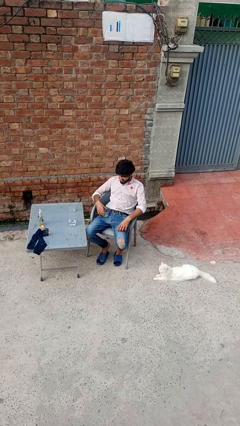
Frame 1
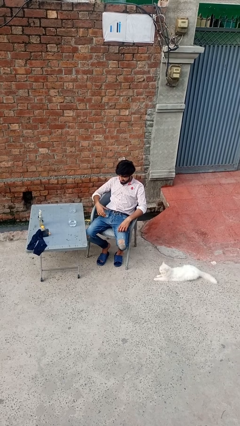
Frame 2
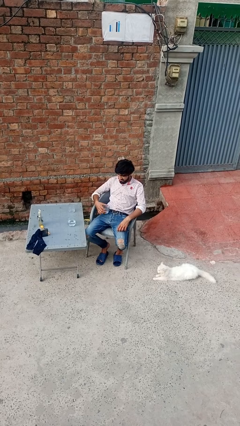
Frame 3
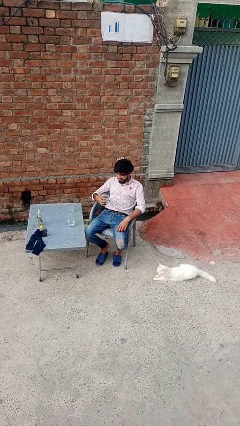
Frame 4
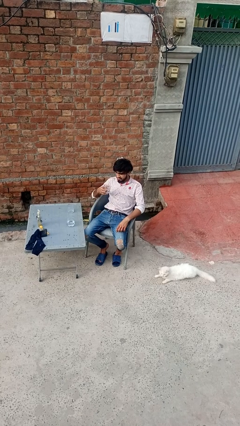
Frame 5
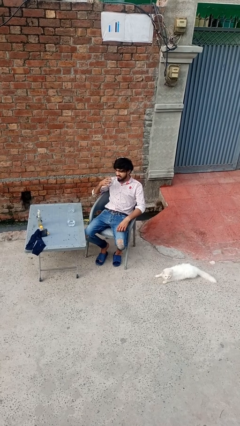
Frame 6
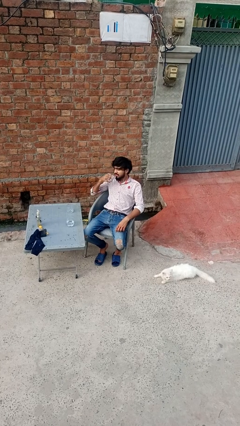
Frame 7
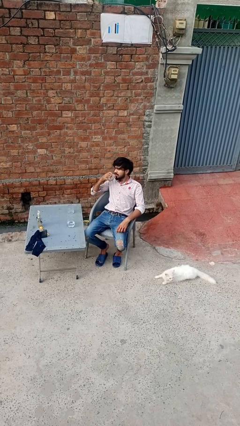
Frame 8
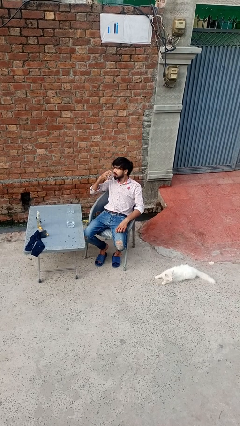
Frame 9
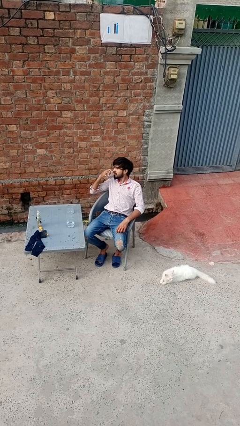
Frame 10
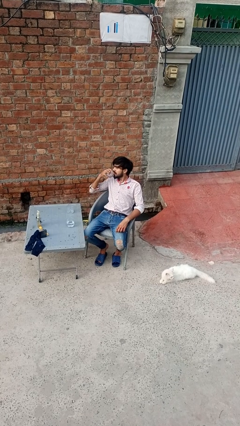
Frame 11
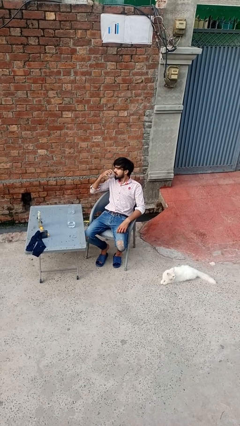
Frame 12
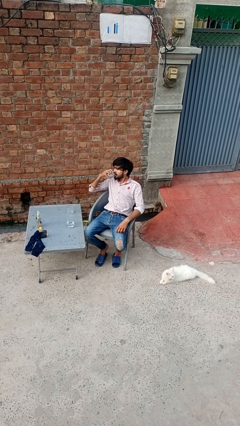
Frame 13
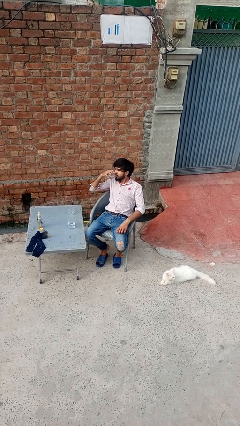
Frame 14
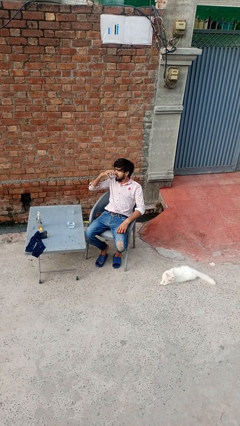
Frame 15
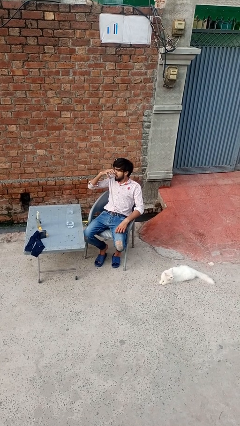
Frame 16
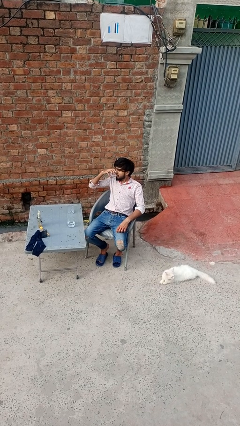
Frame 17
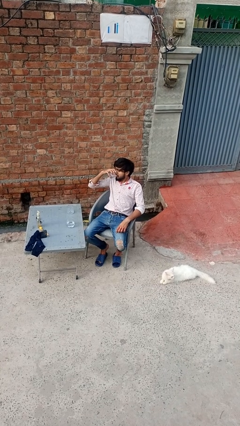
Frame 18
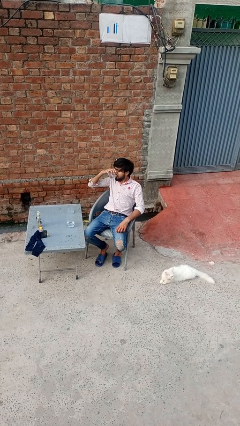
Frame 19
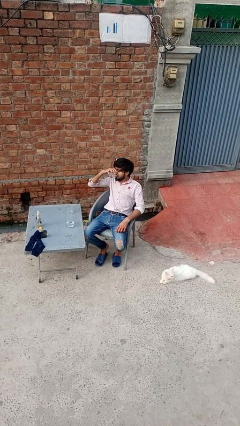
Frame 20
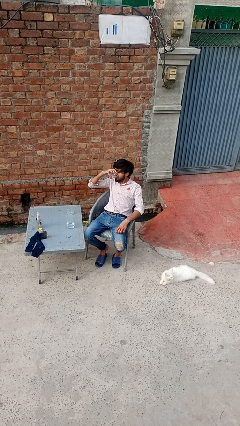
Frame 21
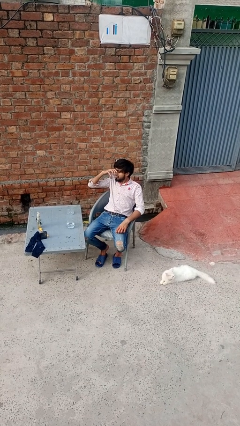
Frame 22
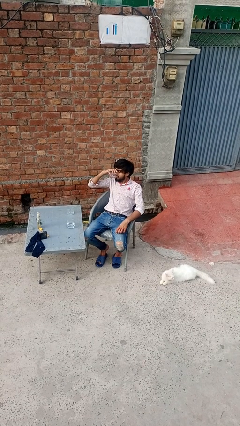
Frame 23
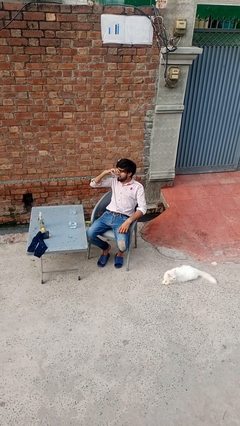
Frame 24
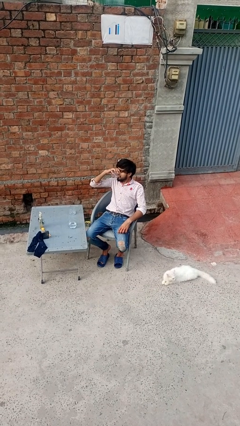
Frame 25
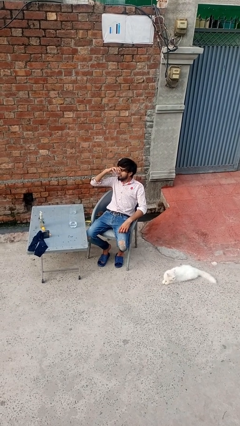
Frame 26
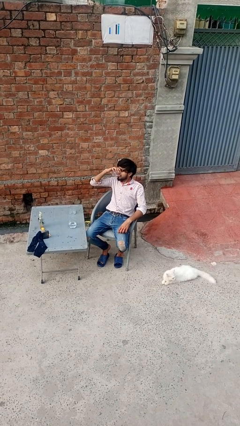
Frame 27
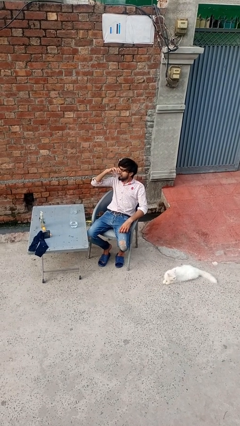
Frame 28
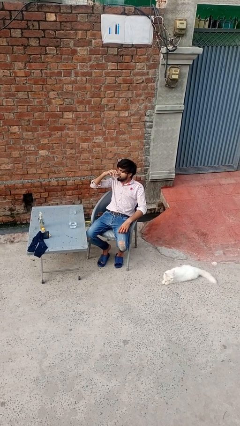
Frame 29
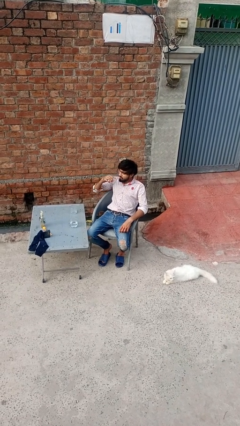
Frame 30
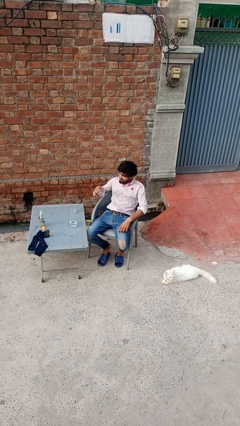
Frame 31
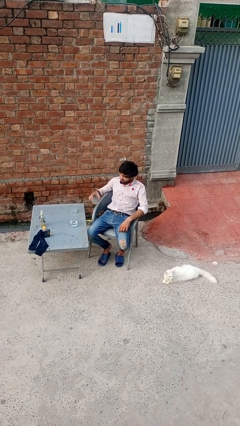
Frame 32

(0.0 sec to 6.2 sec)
person drinks from shotglass

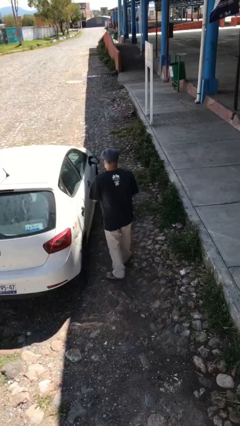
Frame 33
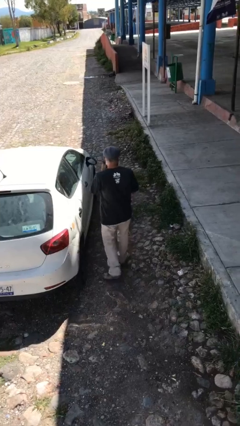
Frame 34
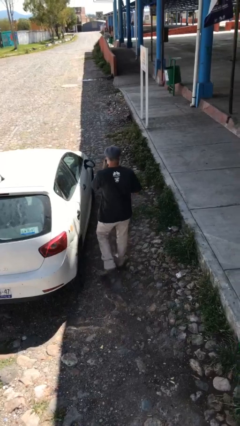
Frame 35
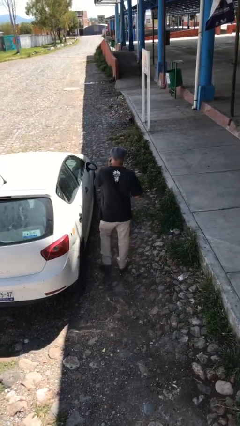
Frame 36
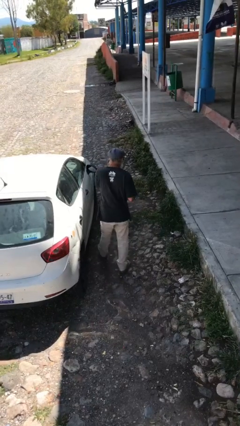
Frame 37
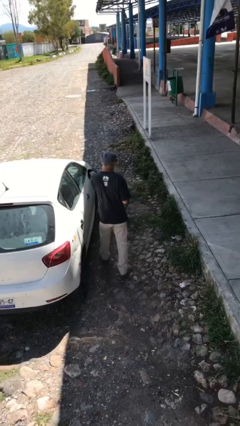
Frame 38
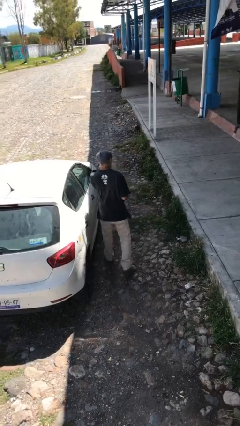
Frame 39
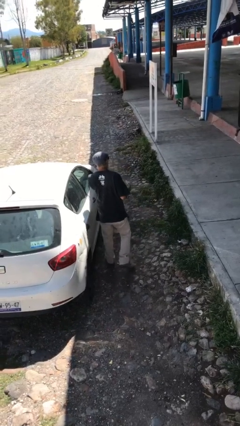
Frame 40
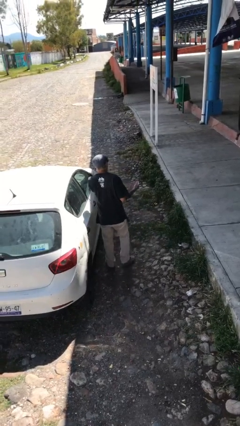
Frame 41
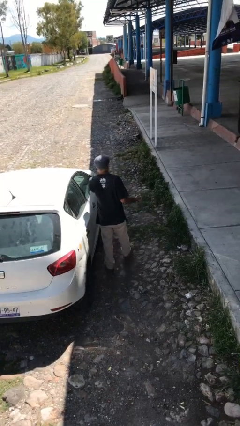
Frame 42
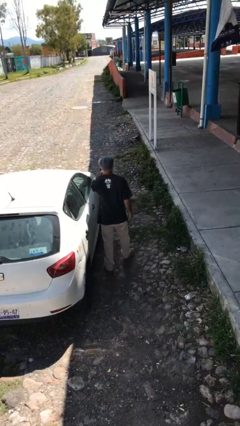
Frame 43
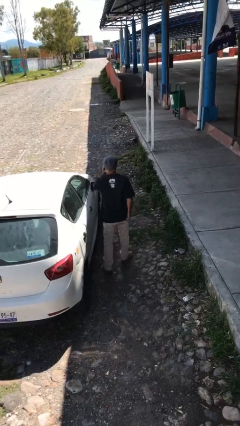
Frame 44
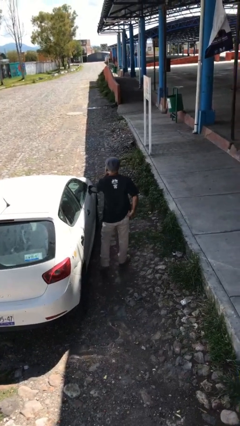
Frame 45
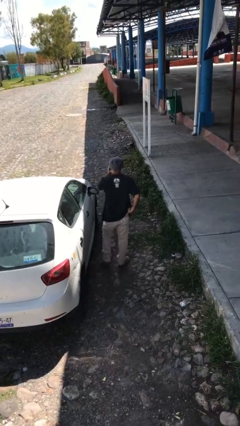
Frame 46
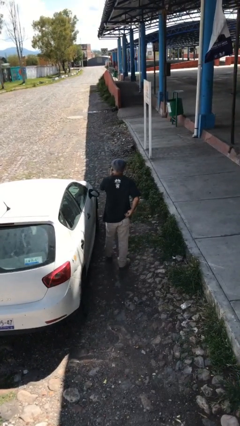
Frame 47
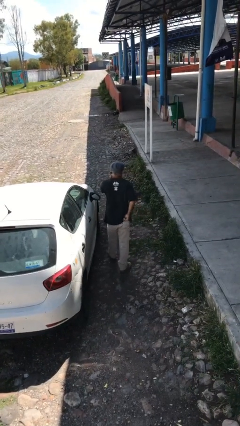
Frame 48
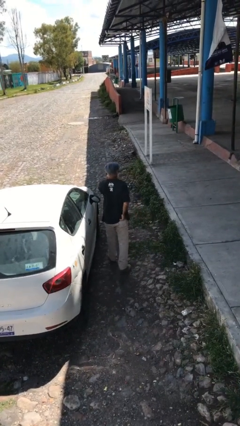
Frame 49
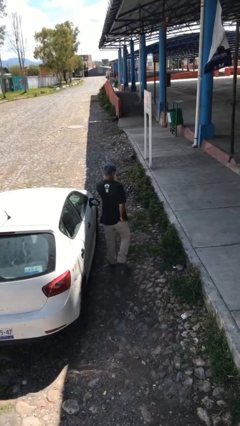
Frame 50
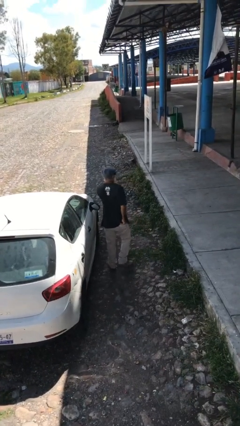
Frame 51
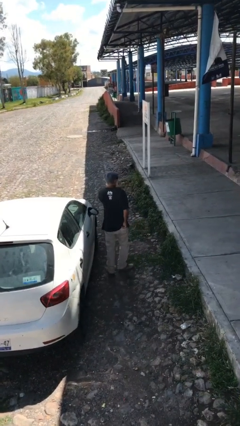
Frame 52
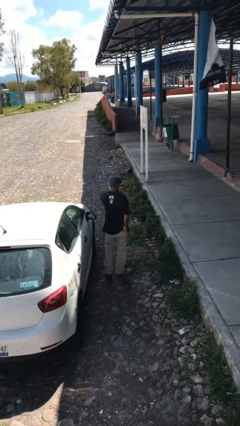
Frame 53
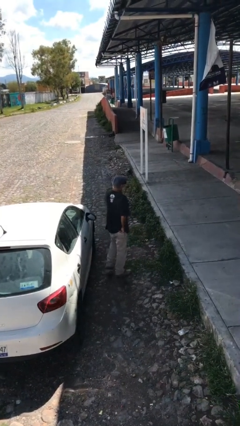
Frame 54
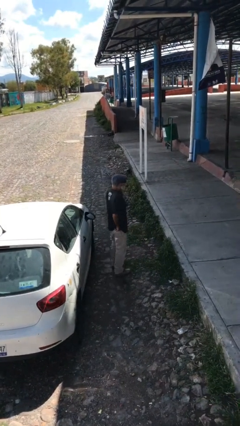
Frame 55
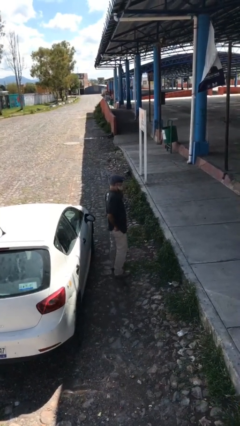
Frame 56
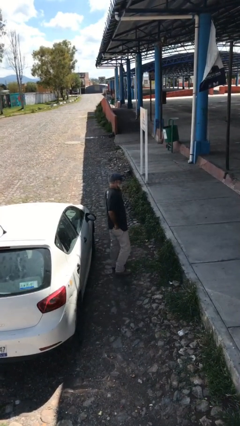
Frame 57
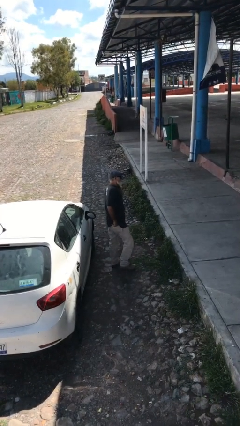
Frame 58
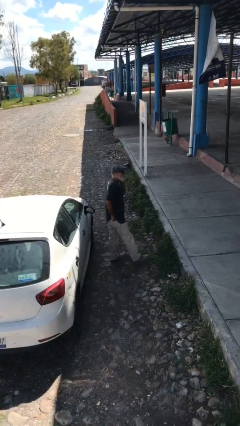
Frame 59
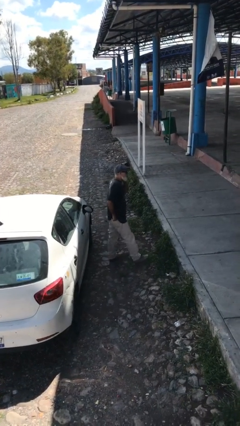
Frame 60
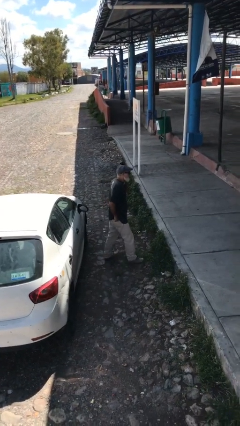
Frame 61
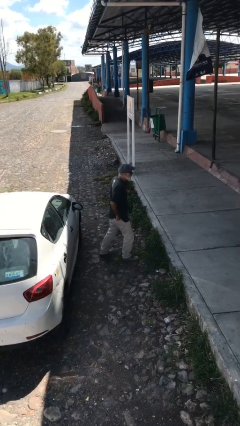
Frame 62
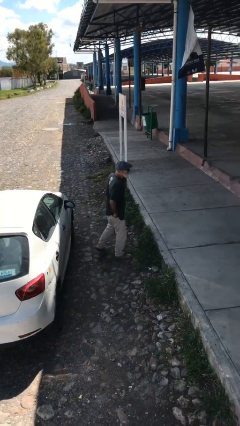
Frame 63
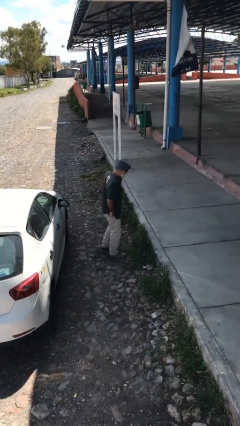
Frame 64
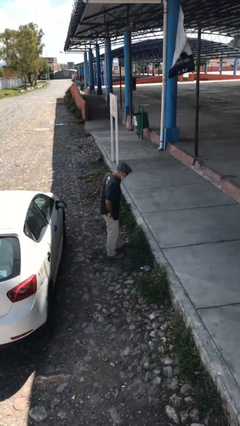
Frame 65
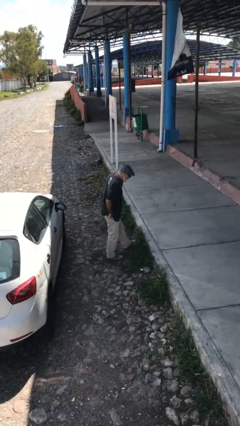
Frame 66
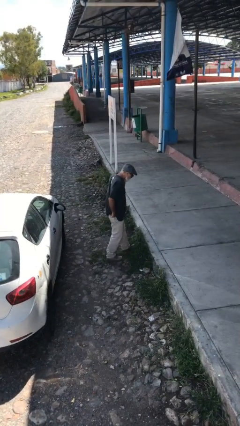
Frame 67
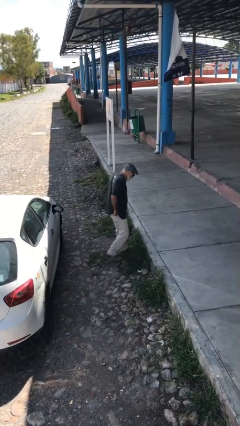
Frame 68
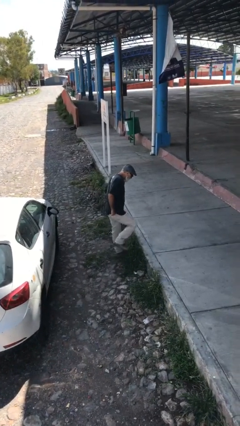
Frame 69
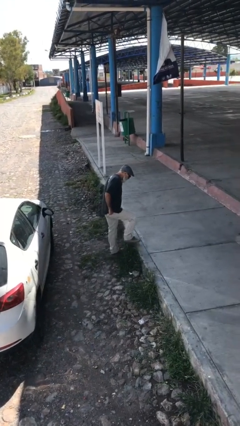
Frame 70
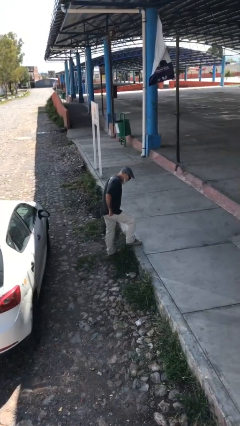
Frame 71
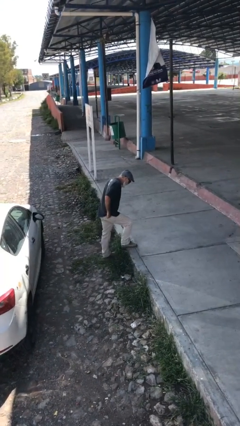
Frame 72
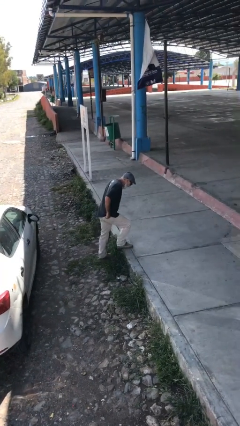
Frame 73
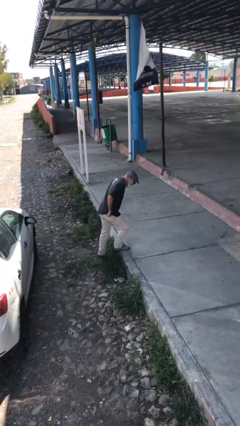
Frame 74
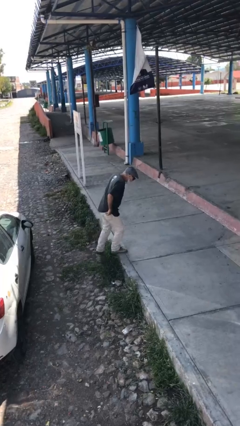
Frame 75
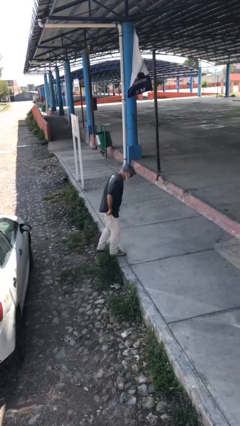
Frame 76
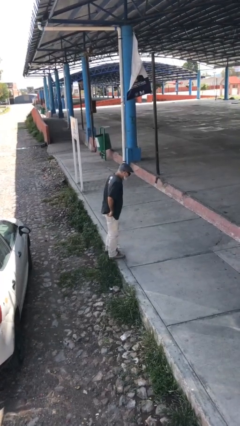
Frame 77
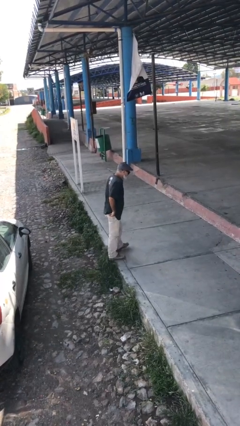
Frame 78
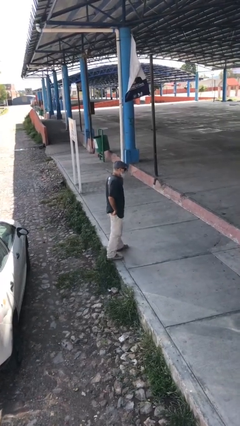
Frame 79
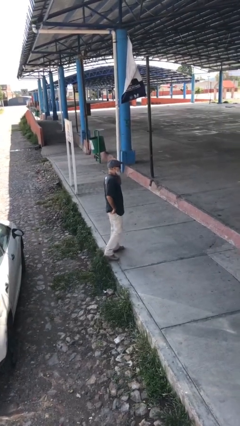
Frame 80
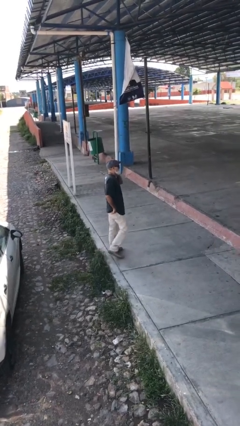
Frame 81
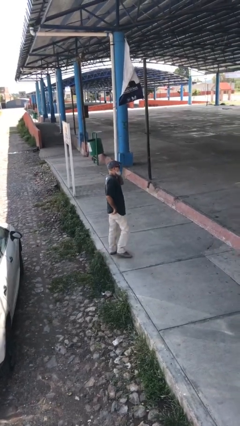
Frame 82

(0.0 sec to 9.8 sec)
person talks on phone

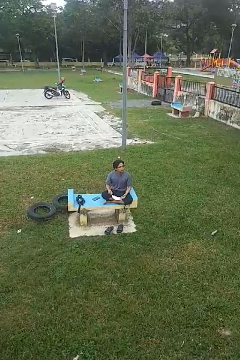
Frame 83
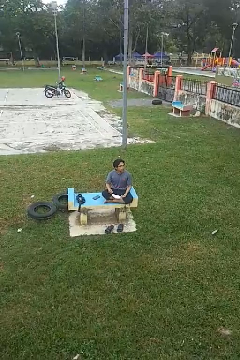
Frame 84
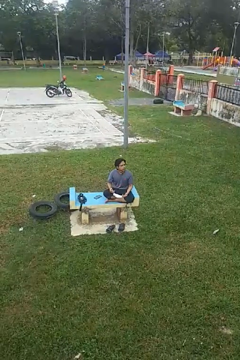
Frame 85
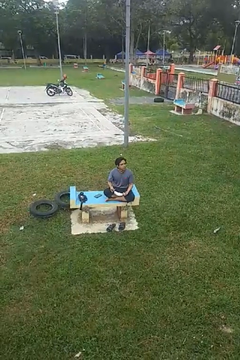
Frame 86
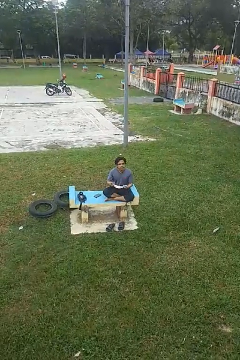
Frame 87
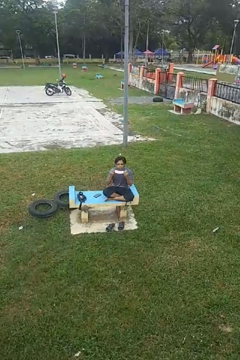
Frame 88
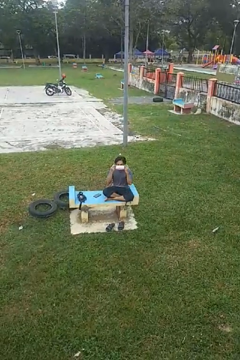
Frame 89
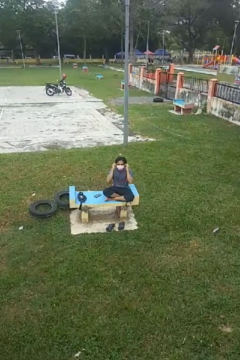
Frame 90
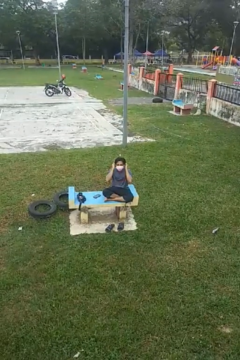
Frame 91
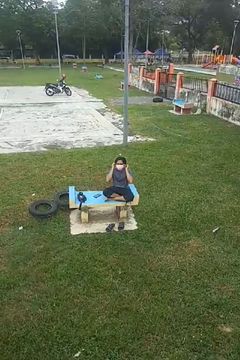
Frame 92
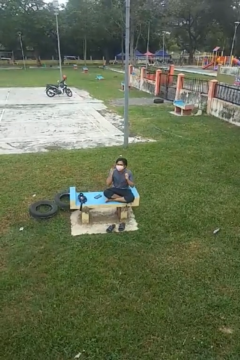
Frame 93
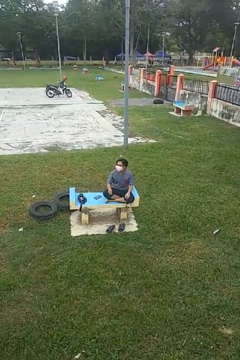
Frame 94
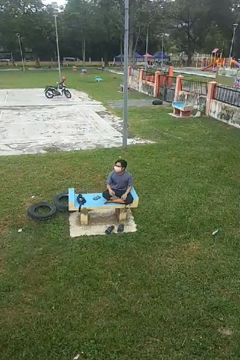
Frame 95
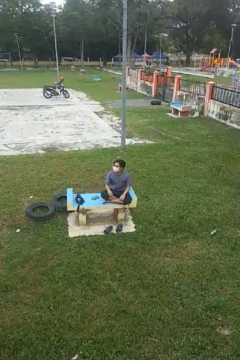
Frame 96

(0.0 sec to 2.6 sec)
person puts on facemask
